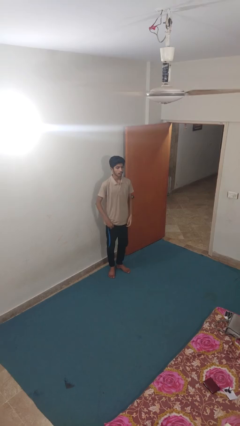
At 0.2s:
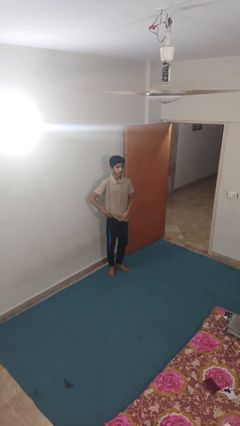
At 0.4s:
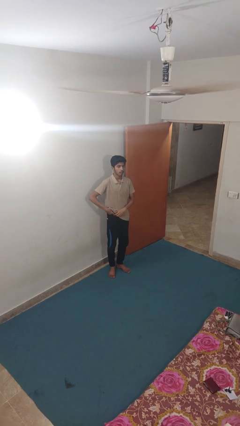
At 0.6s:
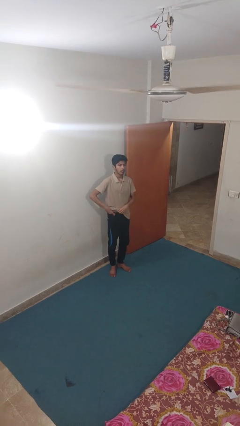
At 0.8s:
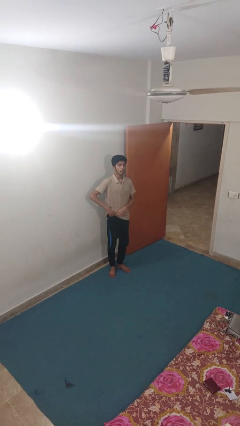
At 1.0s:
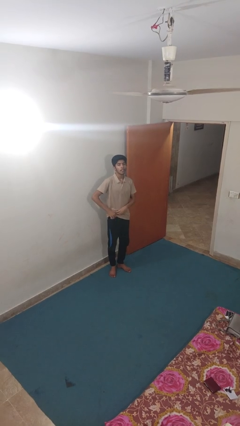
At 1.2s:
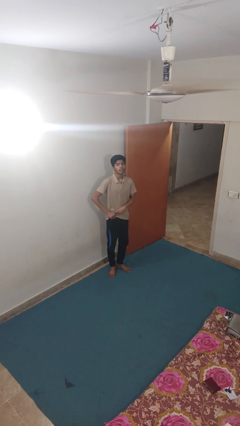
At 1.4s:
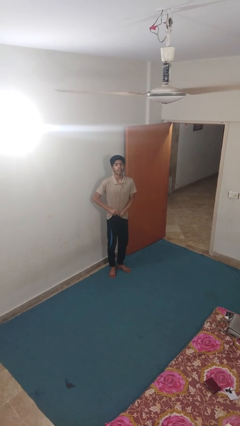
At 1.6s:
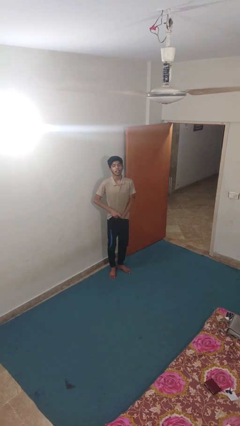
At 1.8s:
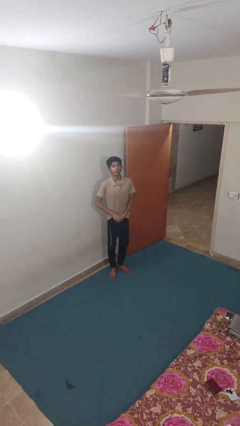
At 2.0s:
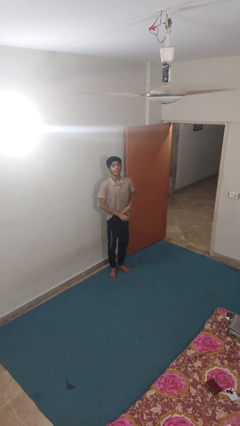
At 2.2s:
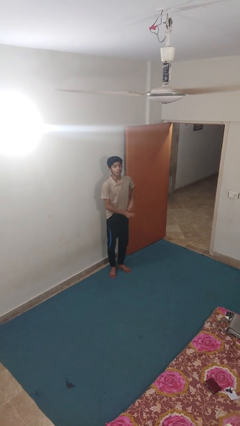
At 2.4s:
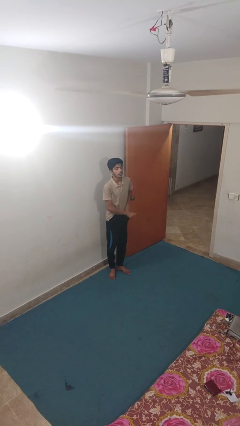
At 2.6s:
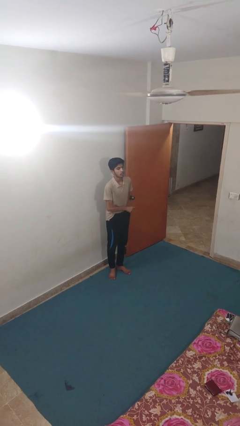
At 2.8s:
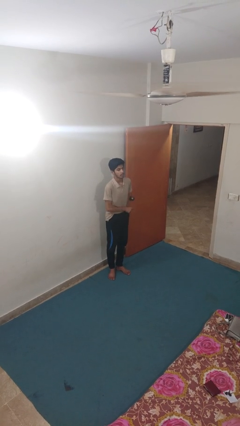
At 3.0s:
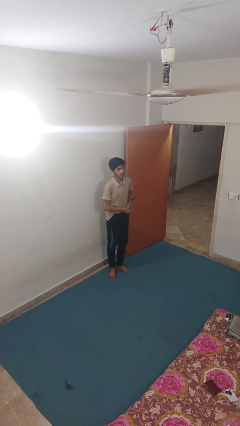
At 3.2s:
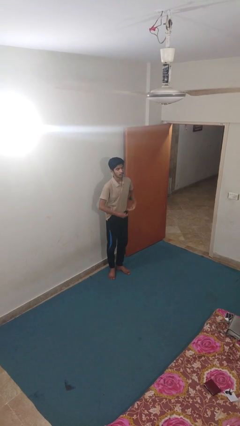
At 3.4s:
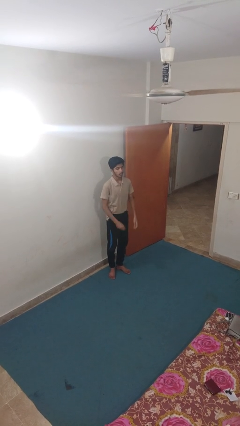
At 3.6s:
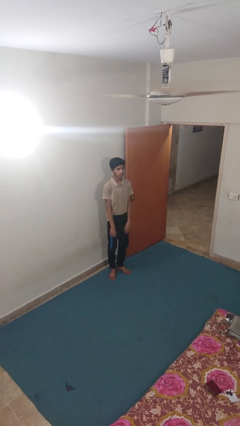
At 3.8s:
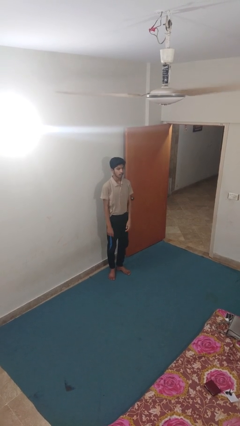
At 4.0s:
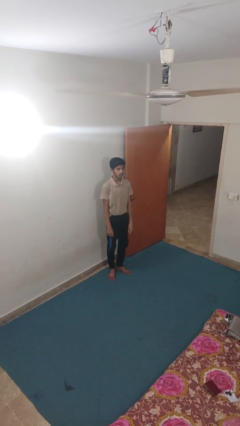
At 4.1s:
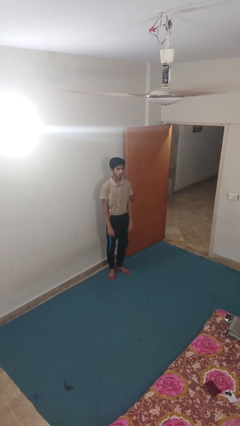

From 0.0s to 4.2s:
person tucks in shirt

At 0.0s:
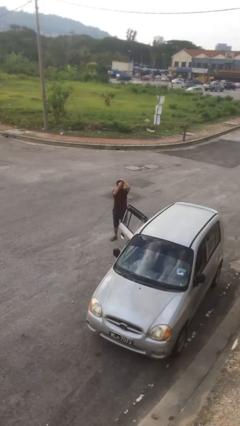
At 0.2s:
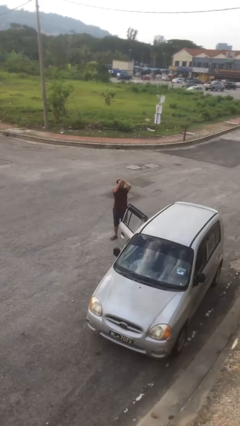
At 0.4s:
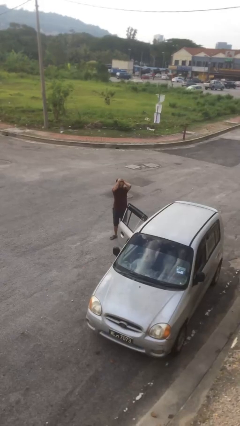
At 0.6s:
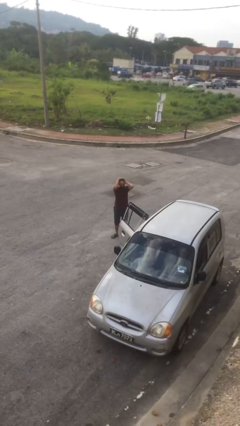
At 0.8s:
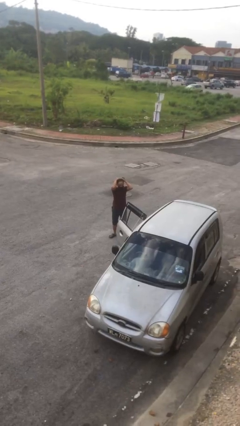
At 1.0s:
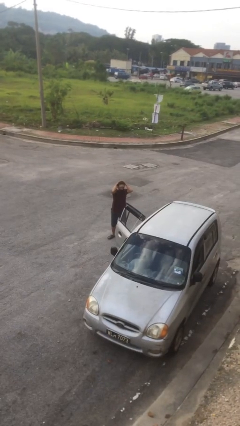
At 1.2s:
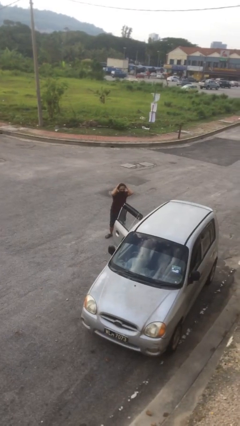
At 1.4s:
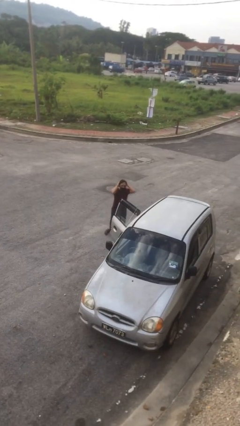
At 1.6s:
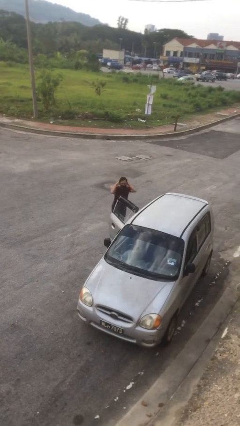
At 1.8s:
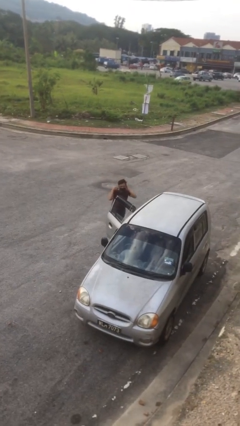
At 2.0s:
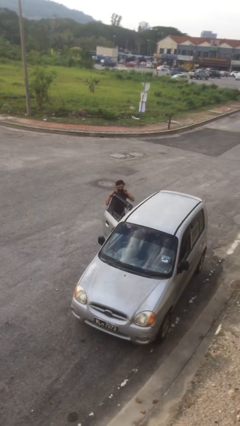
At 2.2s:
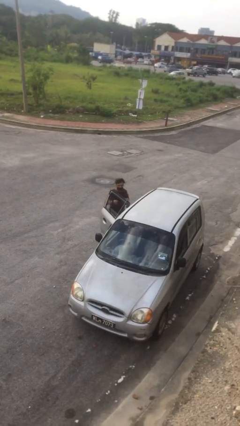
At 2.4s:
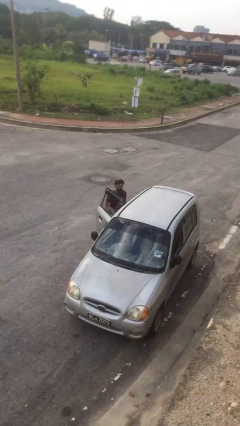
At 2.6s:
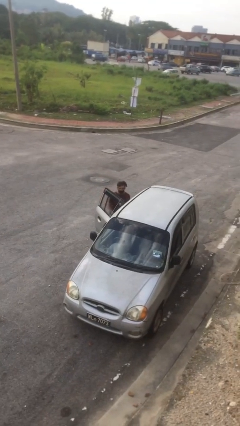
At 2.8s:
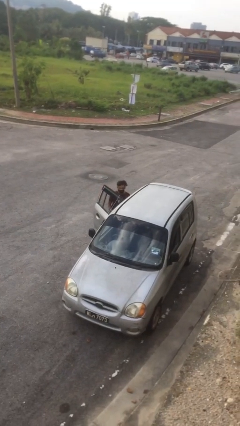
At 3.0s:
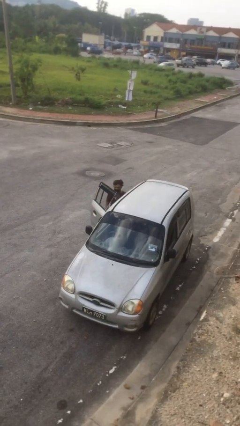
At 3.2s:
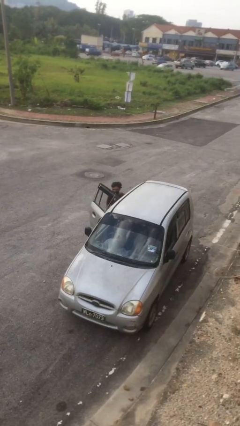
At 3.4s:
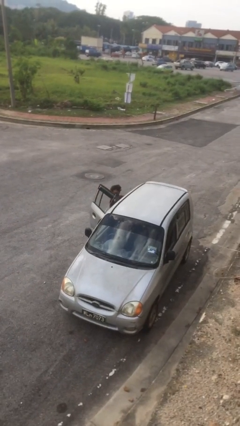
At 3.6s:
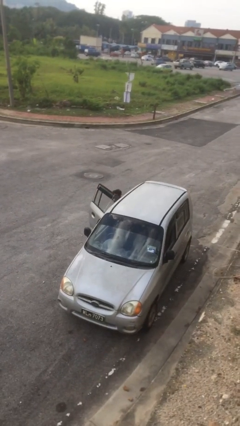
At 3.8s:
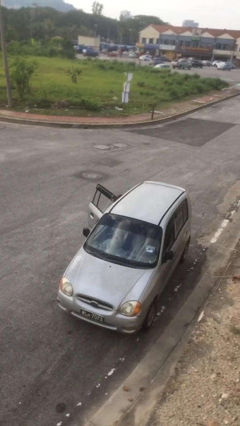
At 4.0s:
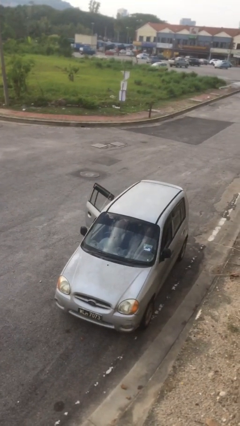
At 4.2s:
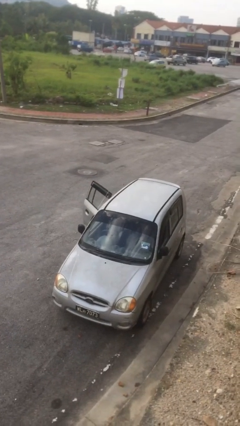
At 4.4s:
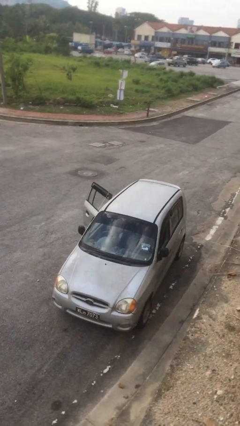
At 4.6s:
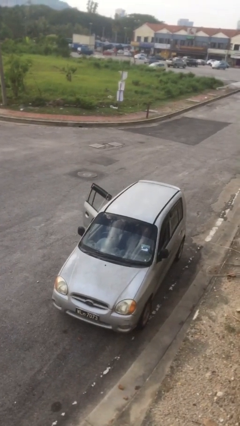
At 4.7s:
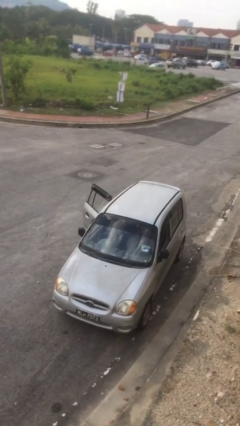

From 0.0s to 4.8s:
person enters car

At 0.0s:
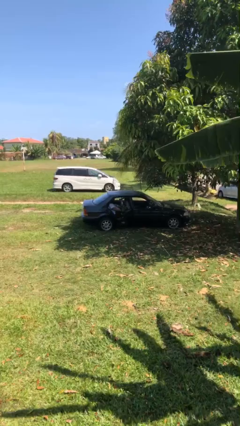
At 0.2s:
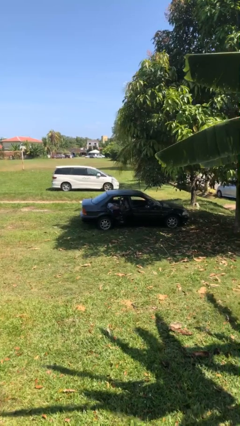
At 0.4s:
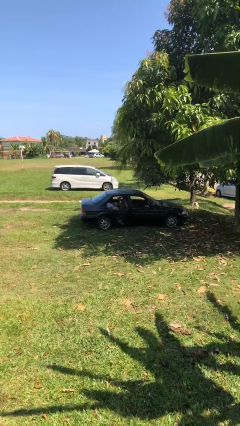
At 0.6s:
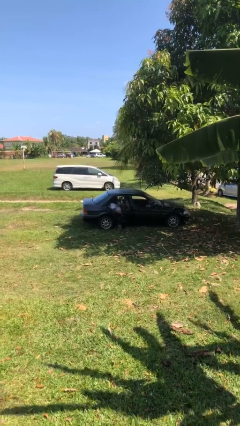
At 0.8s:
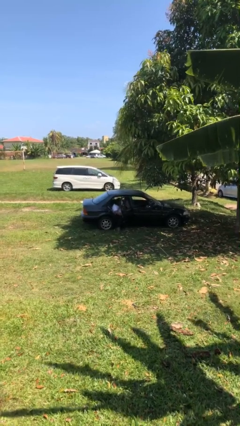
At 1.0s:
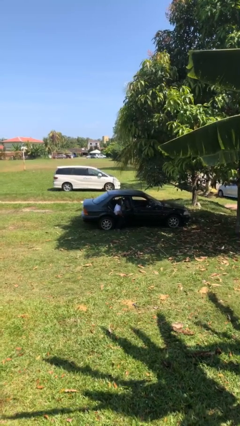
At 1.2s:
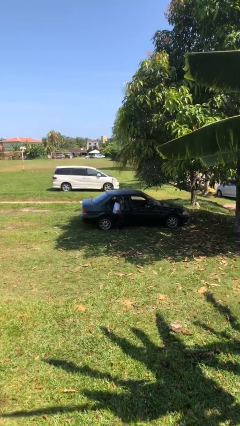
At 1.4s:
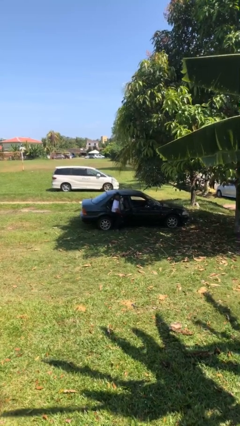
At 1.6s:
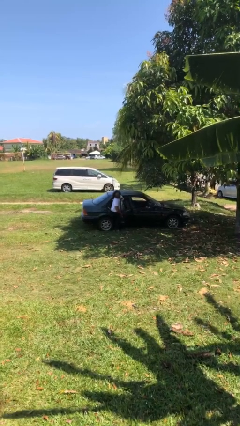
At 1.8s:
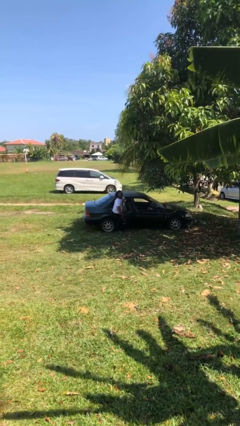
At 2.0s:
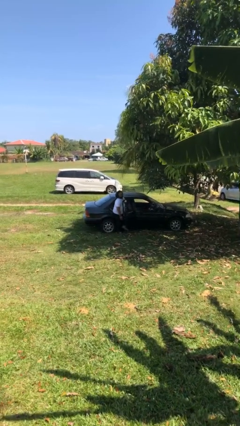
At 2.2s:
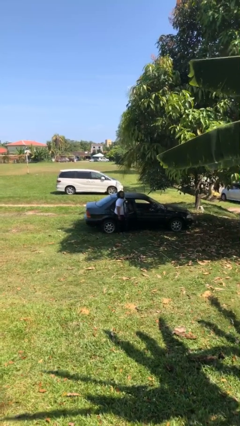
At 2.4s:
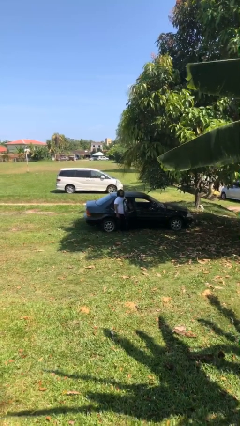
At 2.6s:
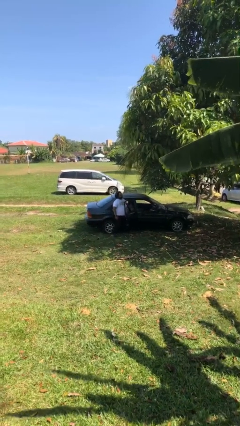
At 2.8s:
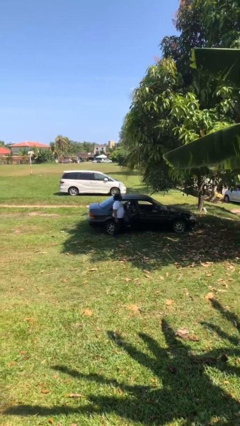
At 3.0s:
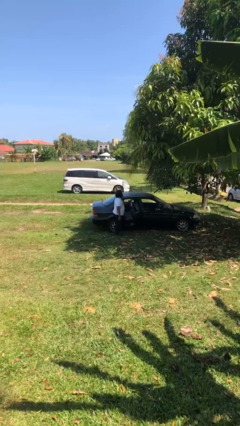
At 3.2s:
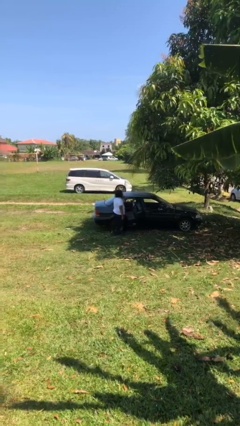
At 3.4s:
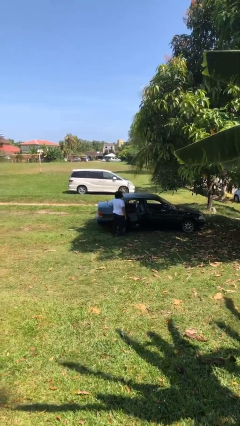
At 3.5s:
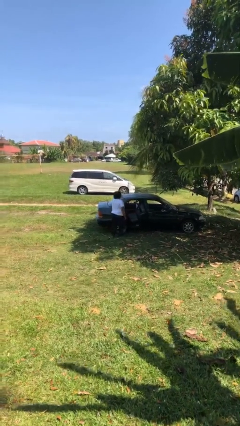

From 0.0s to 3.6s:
person exits car

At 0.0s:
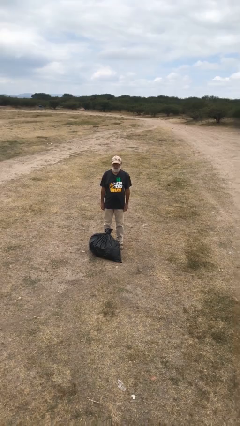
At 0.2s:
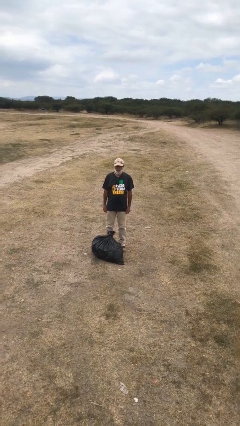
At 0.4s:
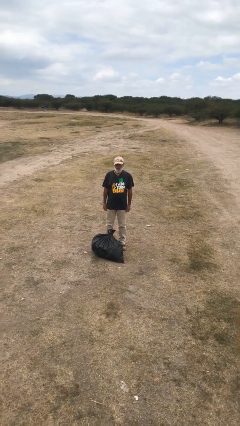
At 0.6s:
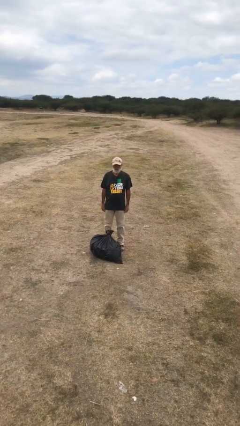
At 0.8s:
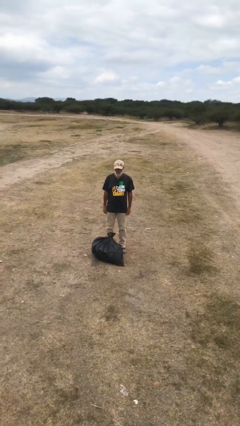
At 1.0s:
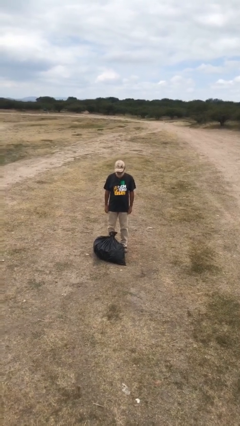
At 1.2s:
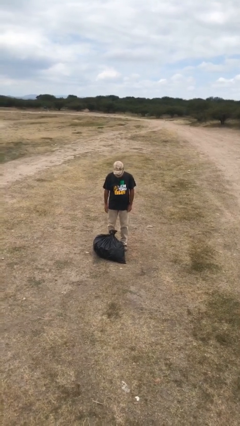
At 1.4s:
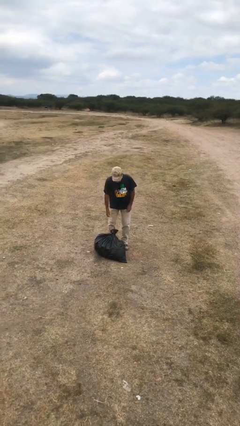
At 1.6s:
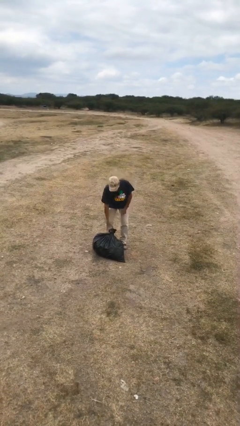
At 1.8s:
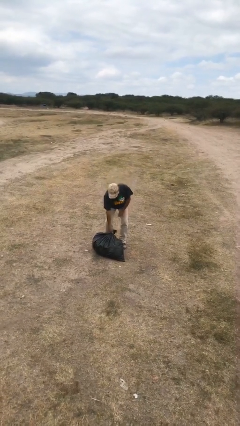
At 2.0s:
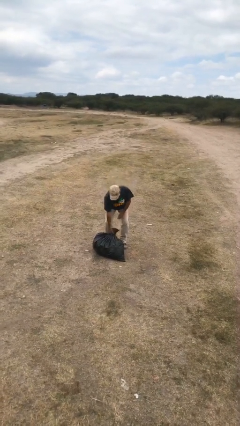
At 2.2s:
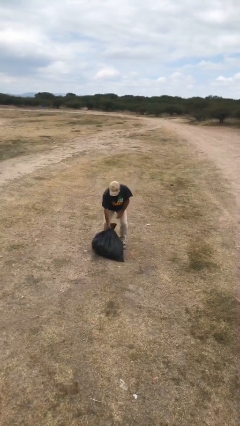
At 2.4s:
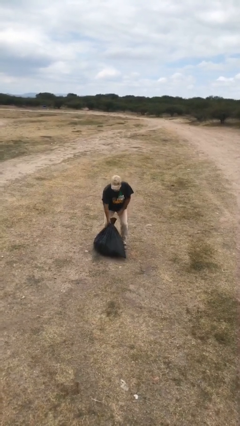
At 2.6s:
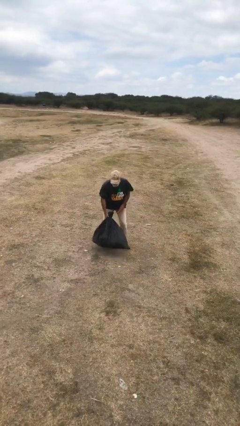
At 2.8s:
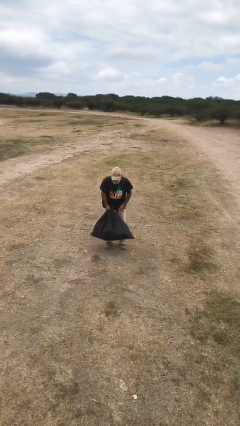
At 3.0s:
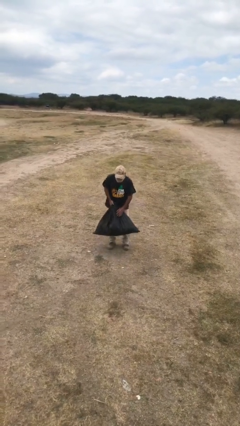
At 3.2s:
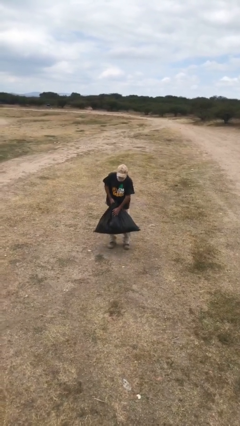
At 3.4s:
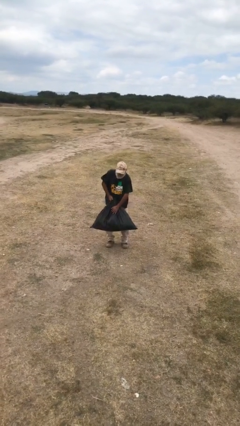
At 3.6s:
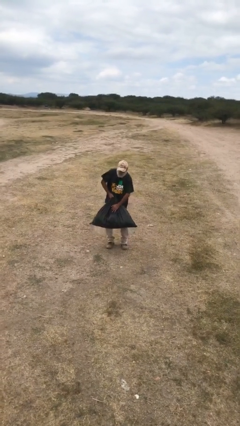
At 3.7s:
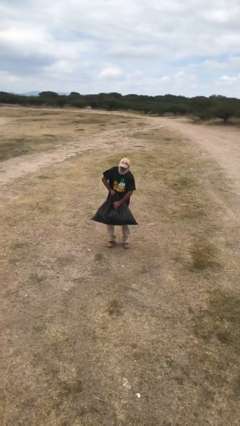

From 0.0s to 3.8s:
person picks up object from floor

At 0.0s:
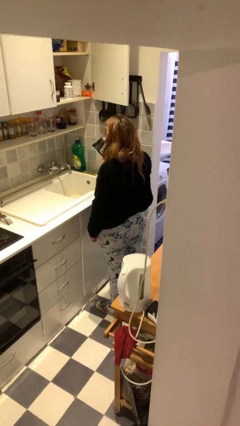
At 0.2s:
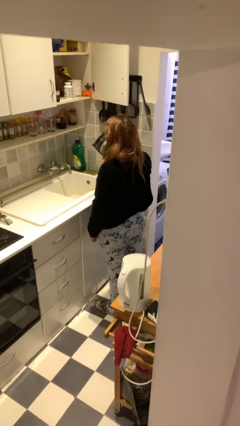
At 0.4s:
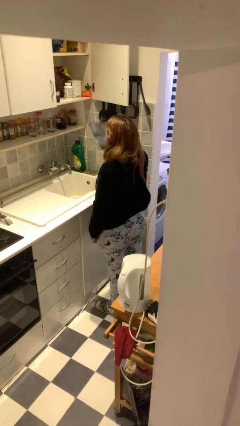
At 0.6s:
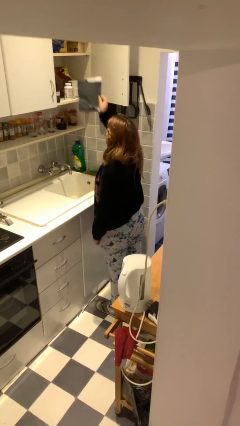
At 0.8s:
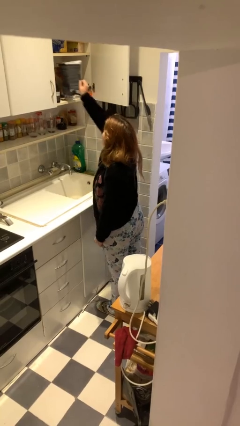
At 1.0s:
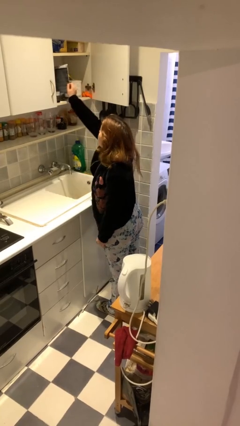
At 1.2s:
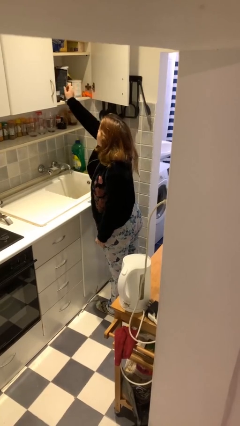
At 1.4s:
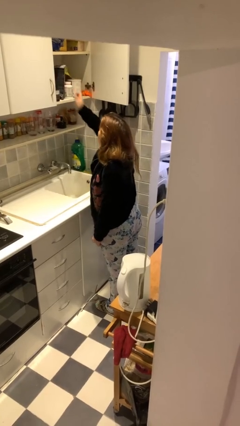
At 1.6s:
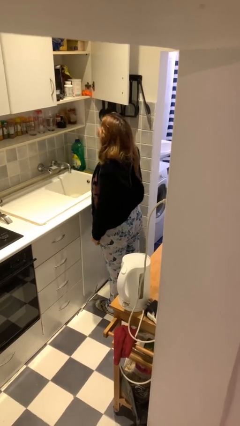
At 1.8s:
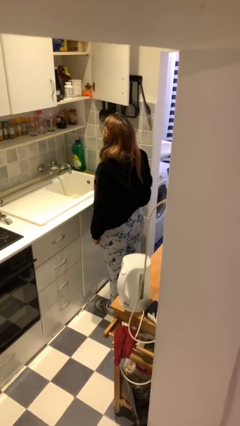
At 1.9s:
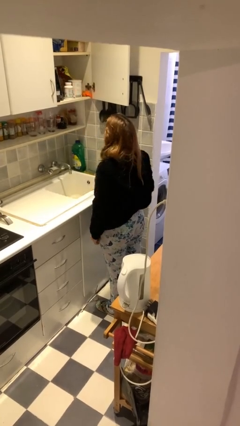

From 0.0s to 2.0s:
person puts object in cabinet
